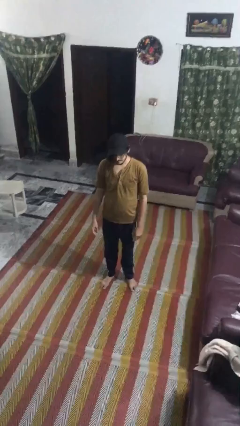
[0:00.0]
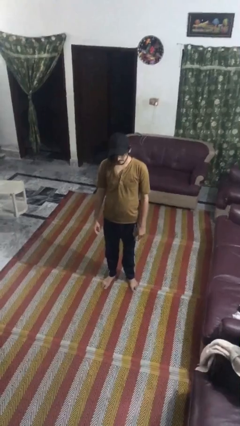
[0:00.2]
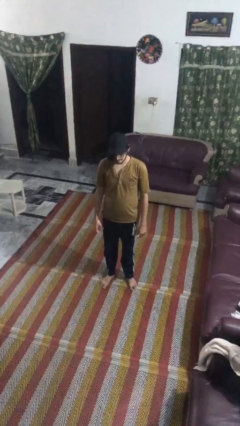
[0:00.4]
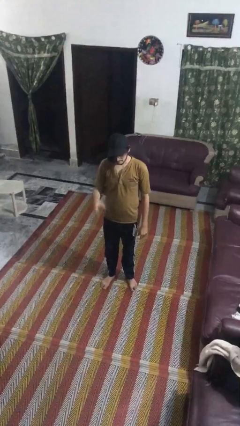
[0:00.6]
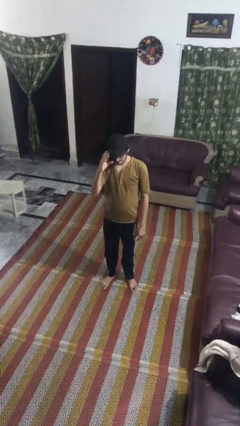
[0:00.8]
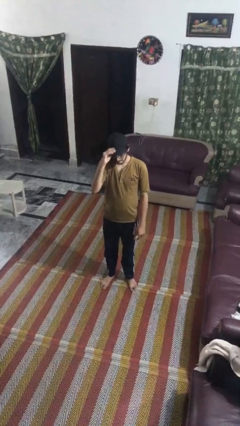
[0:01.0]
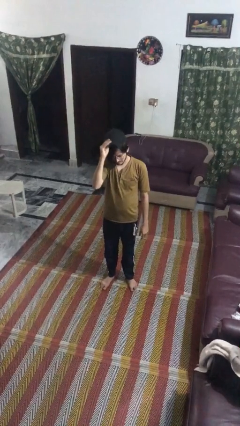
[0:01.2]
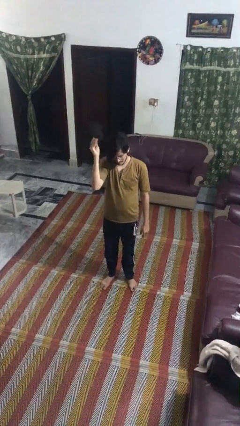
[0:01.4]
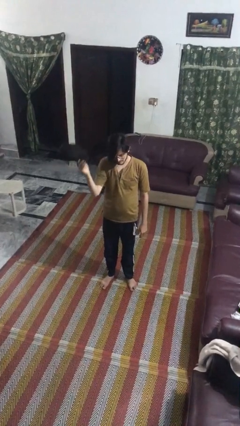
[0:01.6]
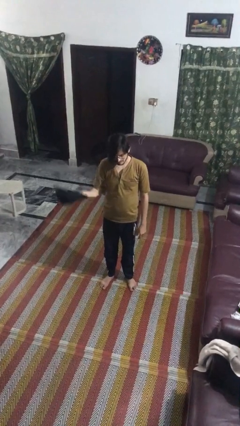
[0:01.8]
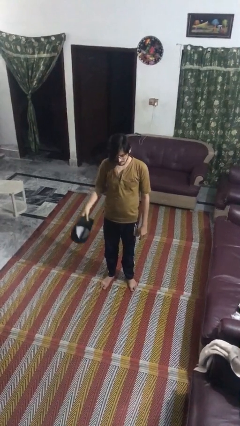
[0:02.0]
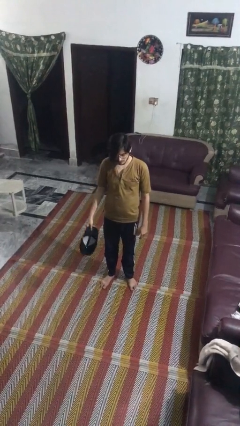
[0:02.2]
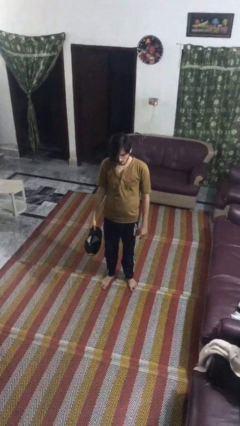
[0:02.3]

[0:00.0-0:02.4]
person takes off hat

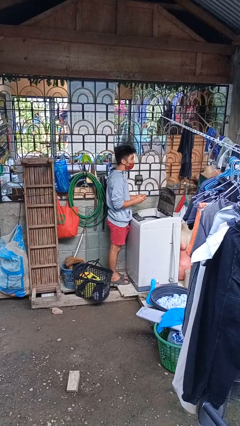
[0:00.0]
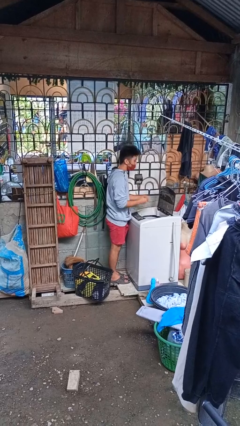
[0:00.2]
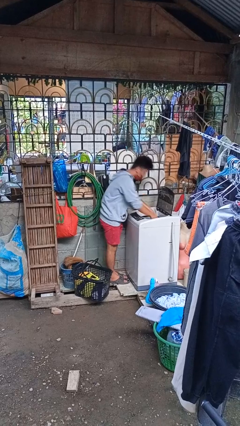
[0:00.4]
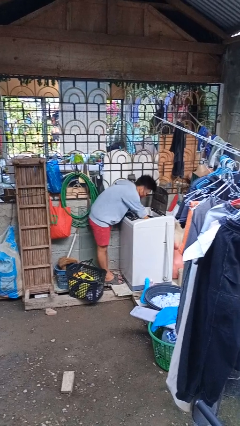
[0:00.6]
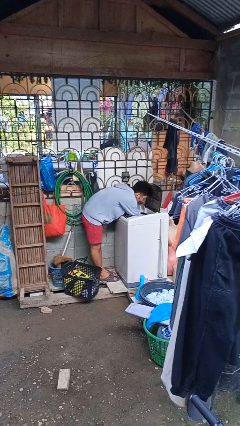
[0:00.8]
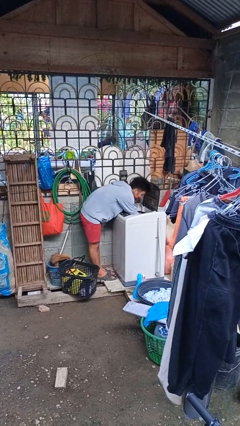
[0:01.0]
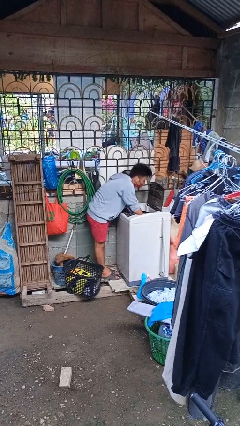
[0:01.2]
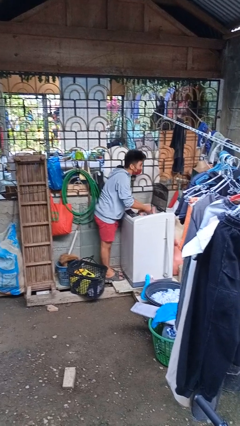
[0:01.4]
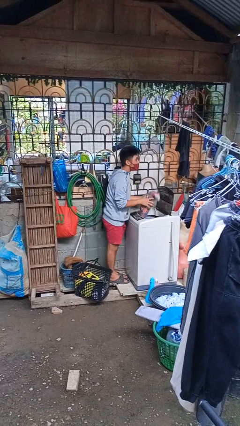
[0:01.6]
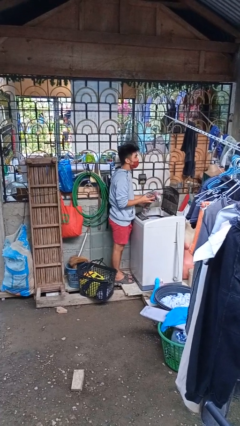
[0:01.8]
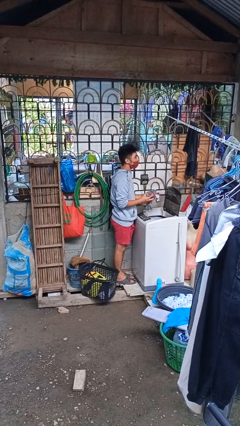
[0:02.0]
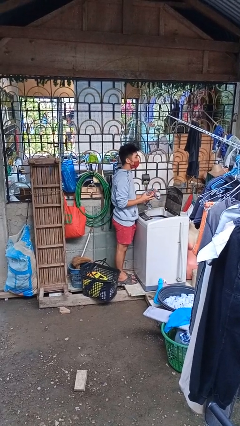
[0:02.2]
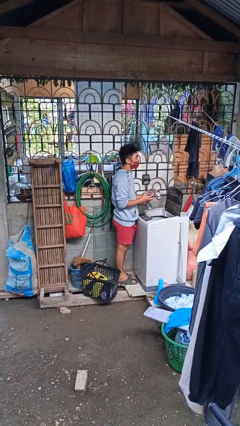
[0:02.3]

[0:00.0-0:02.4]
person unloads clotheswasher

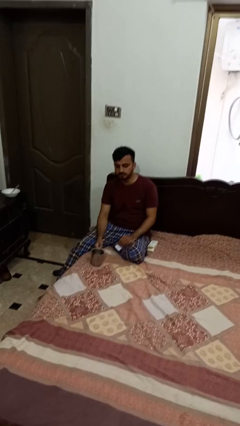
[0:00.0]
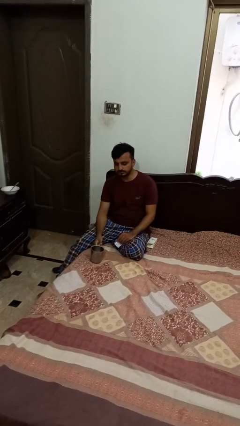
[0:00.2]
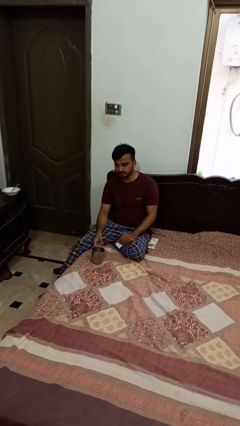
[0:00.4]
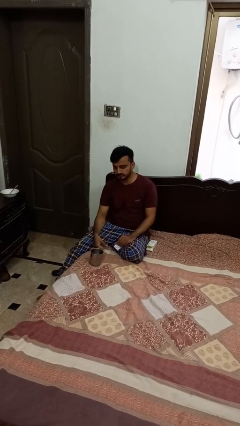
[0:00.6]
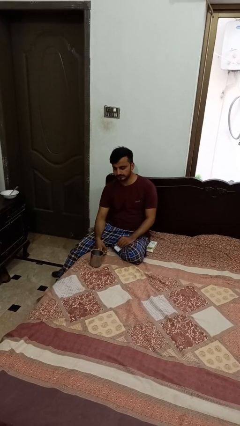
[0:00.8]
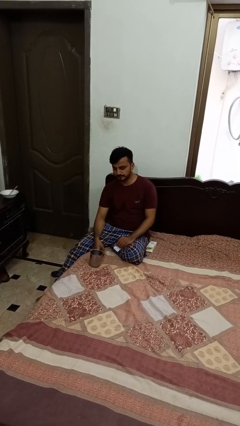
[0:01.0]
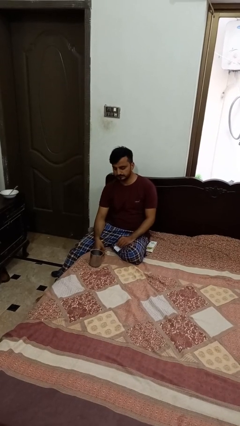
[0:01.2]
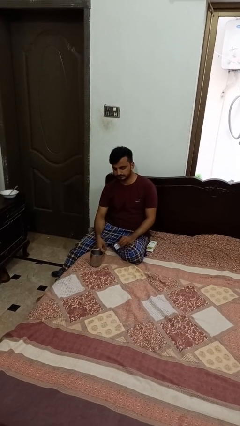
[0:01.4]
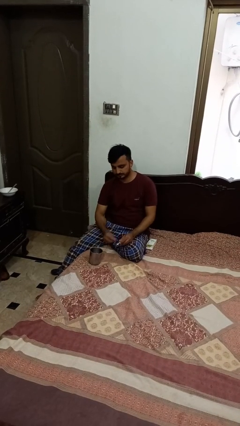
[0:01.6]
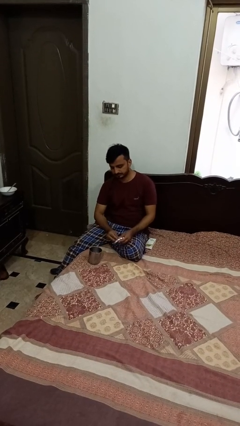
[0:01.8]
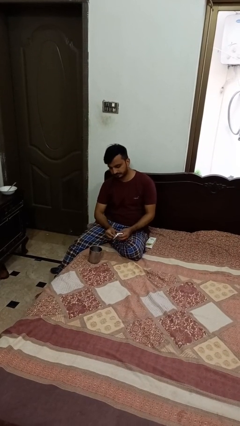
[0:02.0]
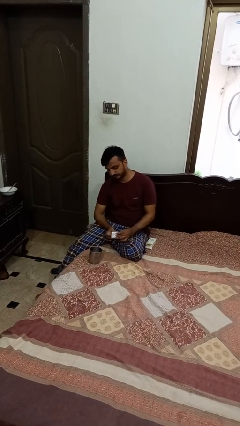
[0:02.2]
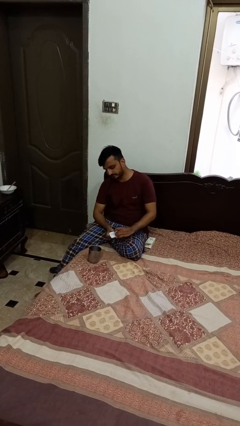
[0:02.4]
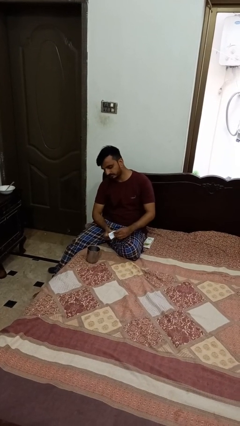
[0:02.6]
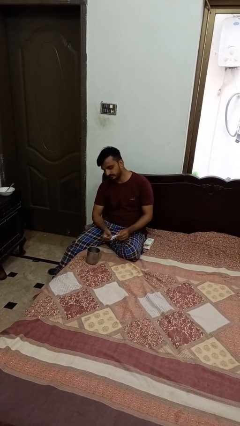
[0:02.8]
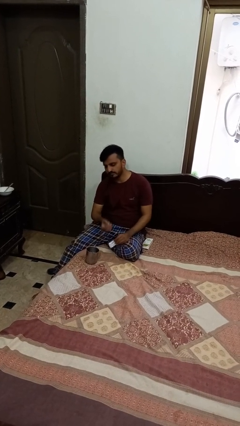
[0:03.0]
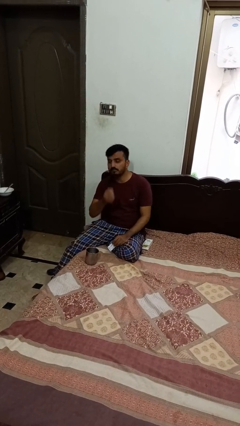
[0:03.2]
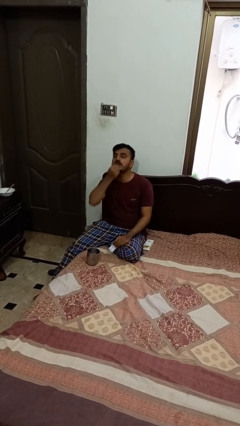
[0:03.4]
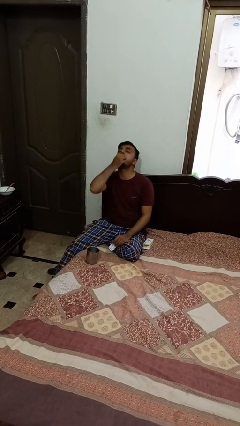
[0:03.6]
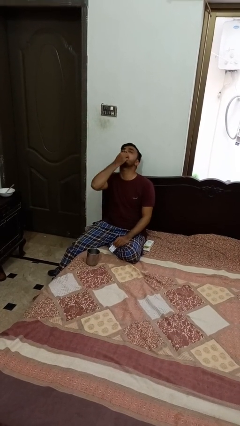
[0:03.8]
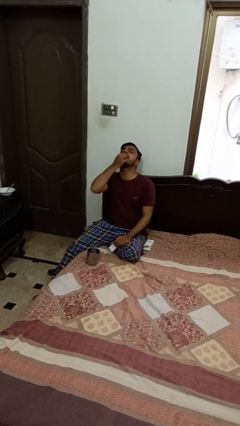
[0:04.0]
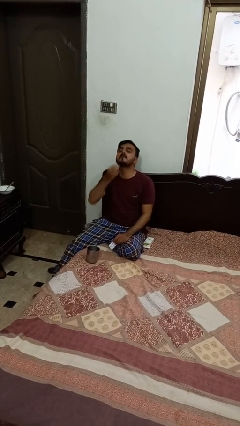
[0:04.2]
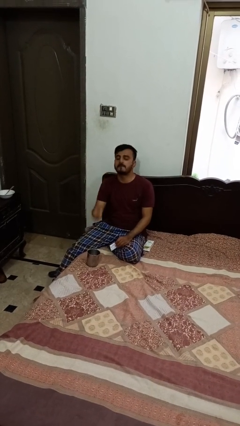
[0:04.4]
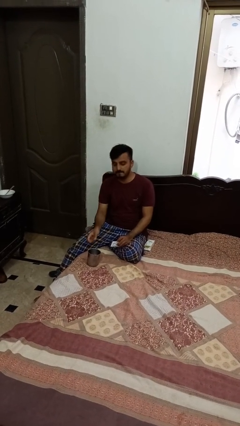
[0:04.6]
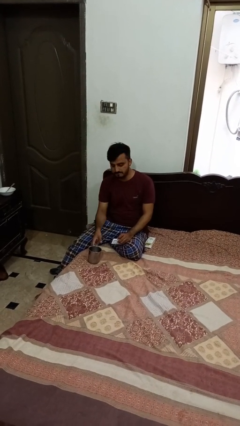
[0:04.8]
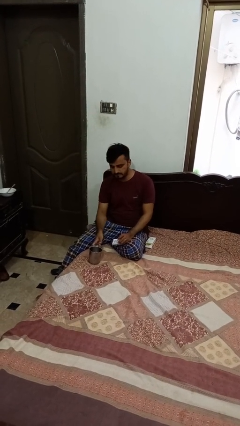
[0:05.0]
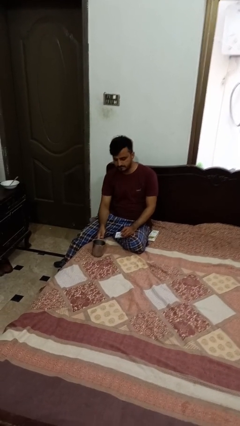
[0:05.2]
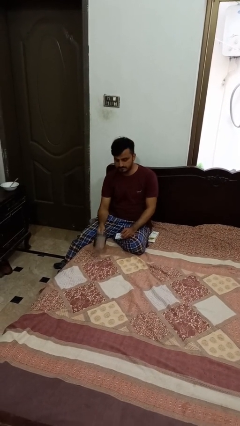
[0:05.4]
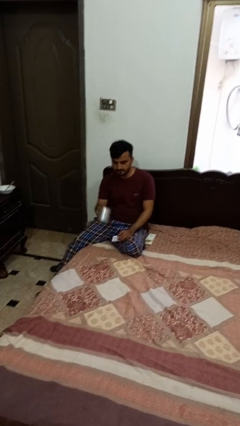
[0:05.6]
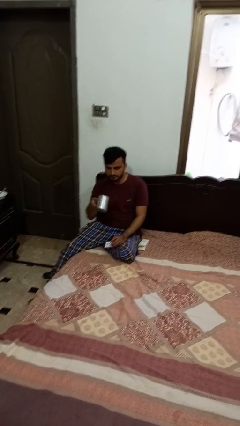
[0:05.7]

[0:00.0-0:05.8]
person takes medicine pills

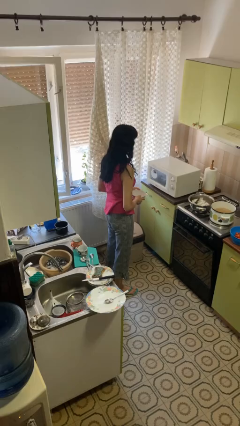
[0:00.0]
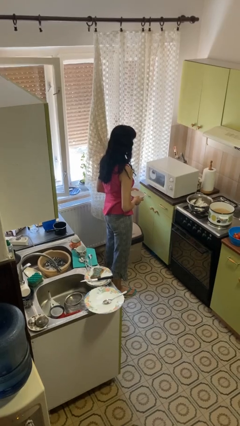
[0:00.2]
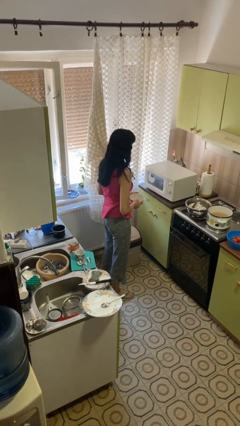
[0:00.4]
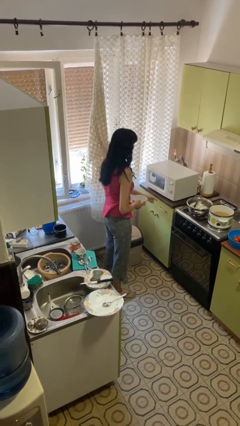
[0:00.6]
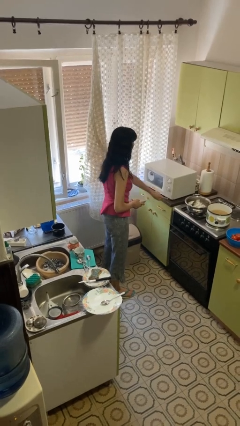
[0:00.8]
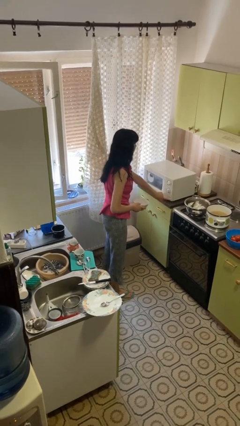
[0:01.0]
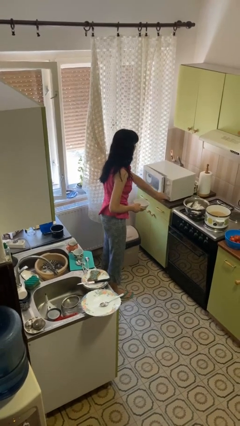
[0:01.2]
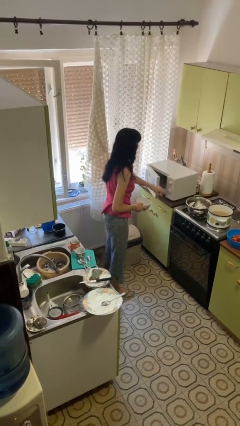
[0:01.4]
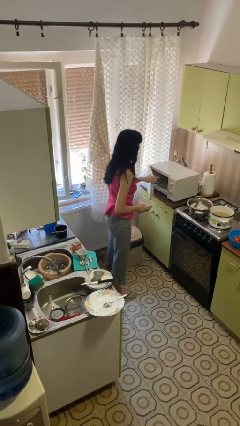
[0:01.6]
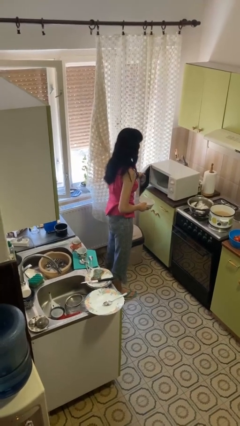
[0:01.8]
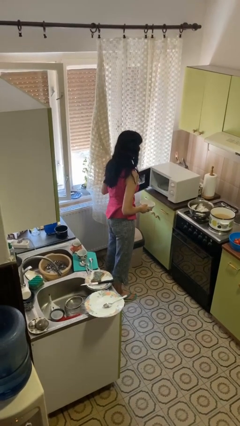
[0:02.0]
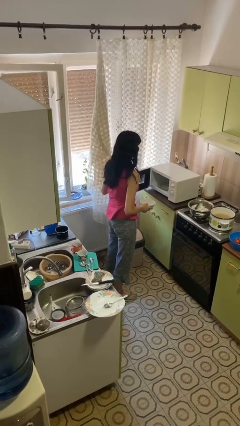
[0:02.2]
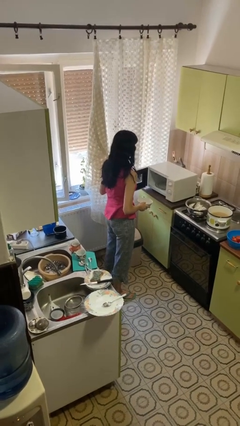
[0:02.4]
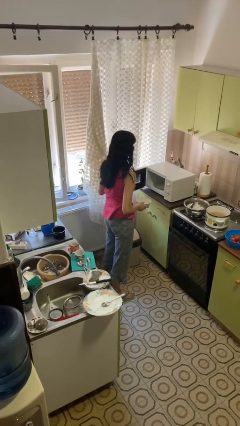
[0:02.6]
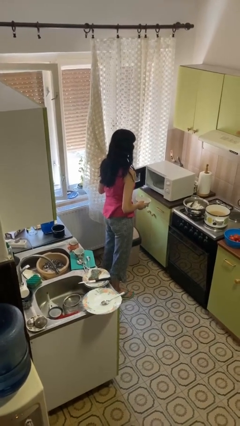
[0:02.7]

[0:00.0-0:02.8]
person opens microwave

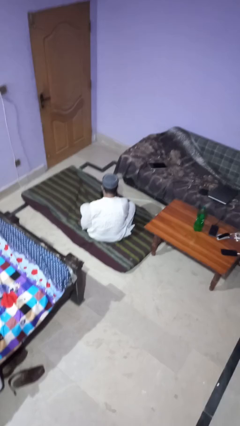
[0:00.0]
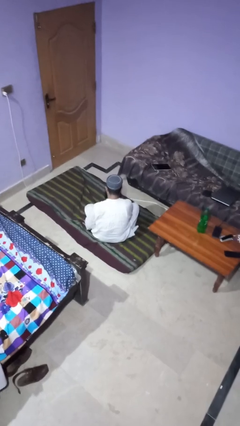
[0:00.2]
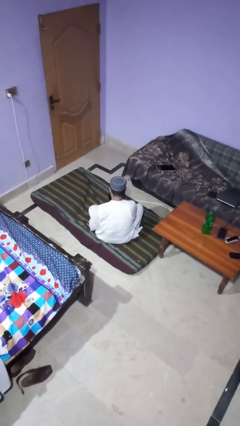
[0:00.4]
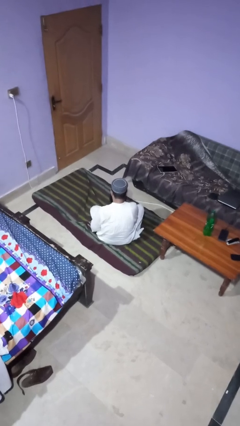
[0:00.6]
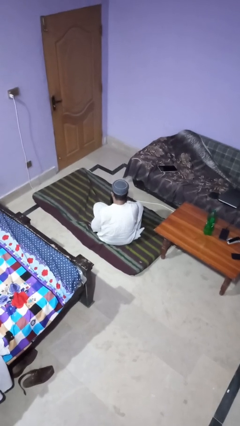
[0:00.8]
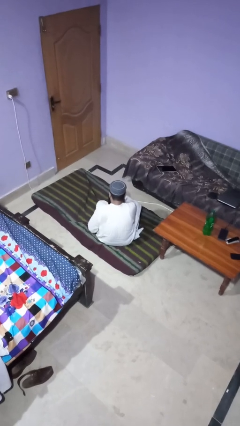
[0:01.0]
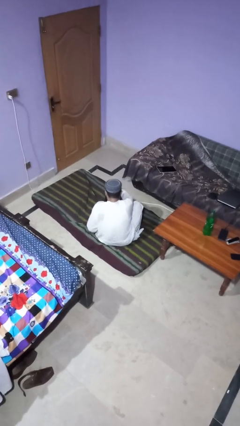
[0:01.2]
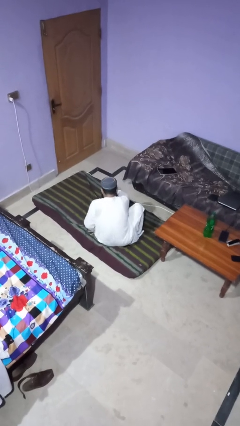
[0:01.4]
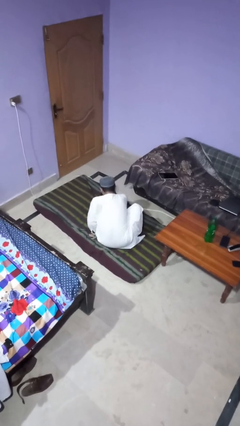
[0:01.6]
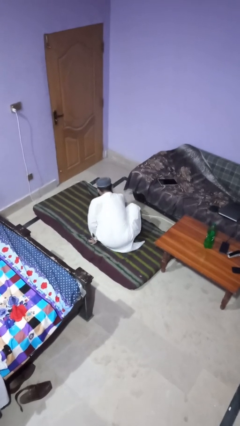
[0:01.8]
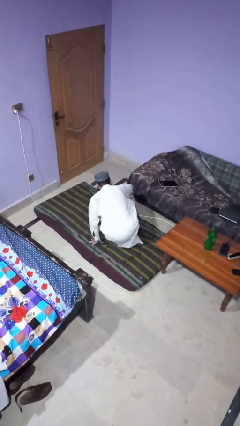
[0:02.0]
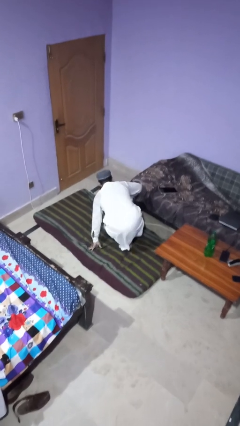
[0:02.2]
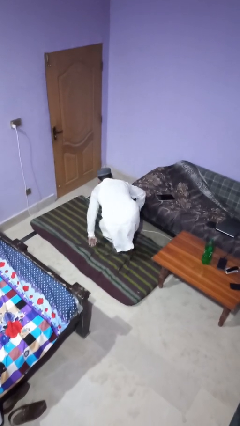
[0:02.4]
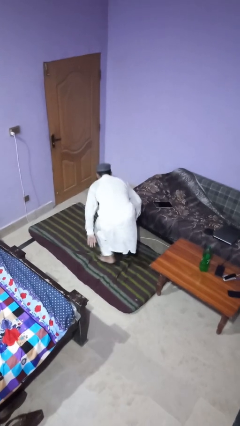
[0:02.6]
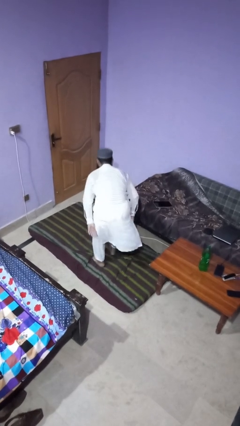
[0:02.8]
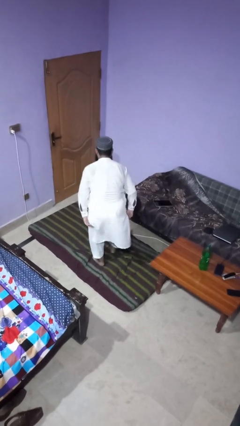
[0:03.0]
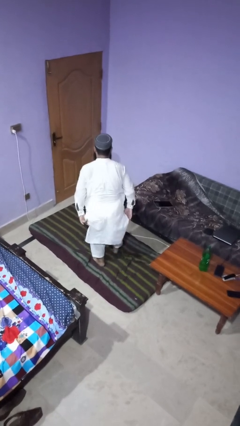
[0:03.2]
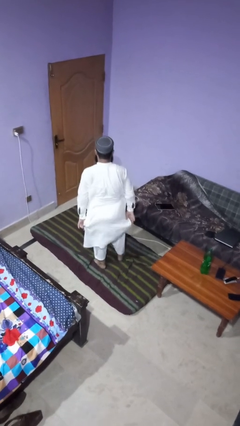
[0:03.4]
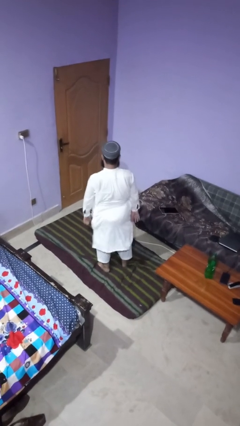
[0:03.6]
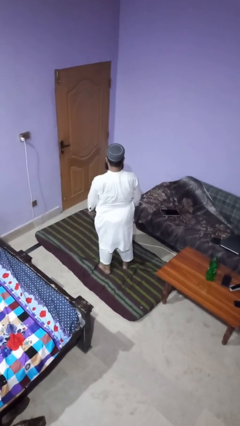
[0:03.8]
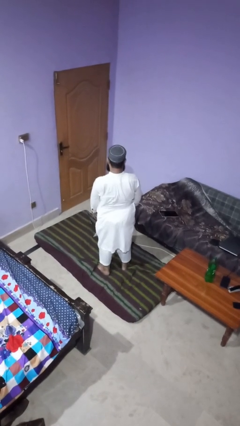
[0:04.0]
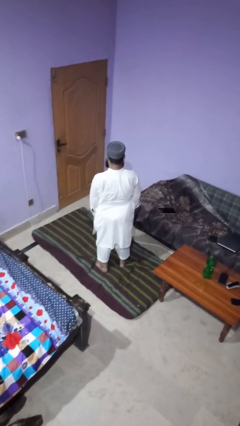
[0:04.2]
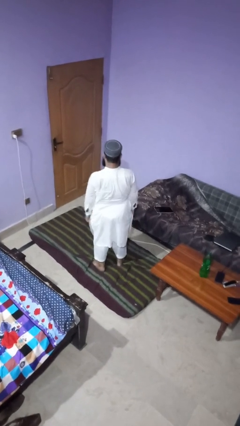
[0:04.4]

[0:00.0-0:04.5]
person stands up from floor
